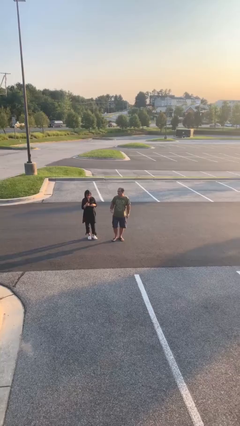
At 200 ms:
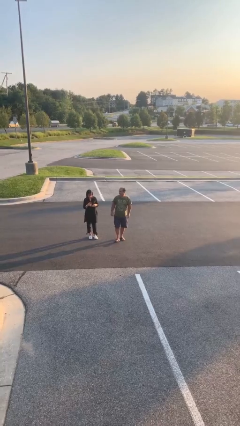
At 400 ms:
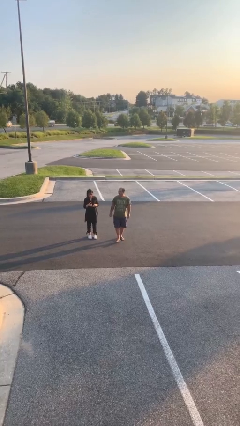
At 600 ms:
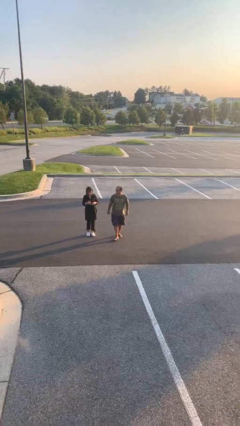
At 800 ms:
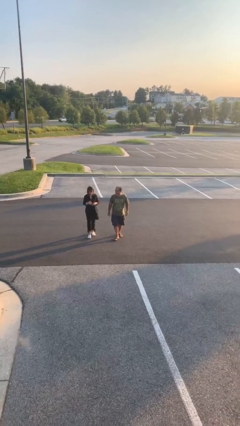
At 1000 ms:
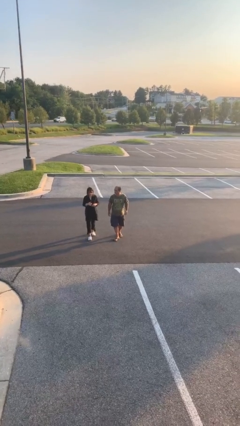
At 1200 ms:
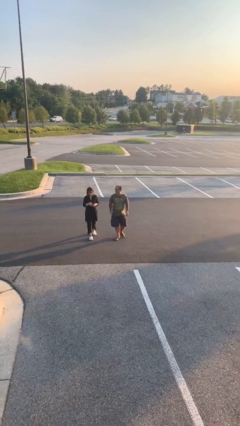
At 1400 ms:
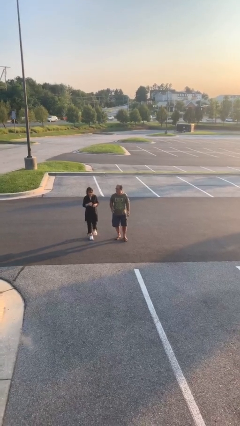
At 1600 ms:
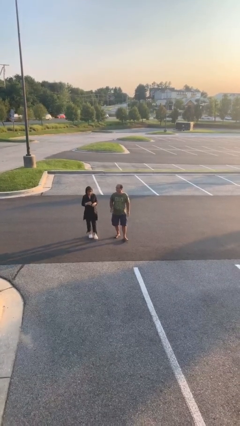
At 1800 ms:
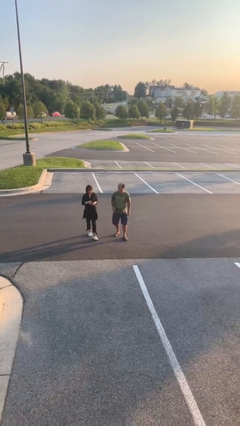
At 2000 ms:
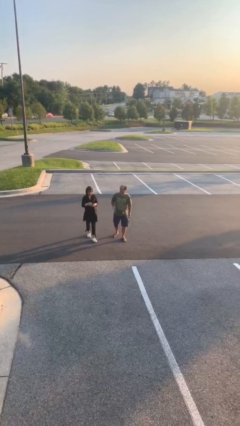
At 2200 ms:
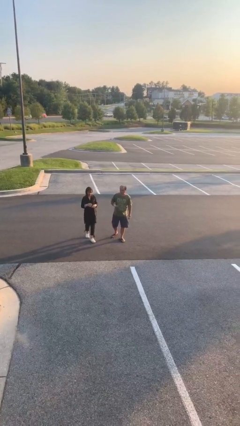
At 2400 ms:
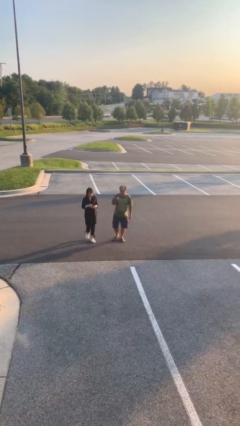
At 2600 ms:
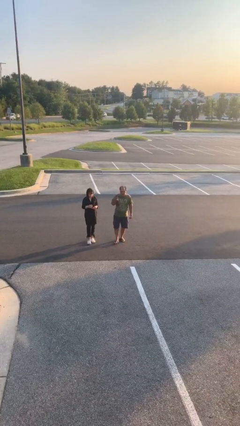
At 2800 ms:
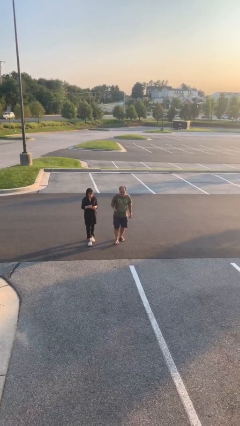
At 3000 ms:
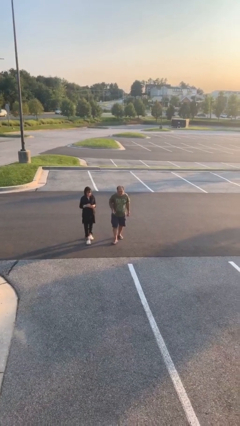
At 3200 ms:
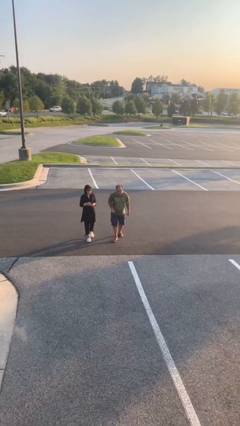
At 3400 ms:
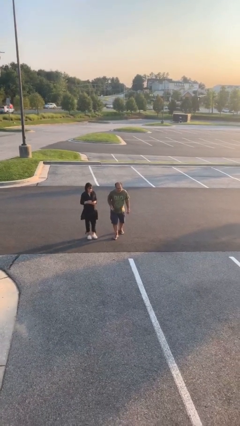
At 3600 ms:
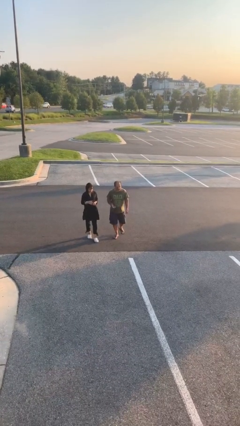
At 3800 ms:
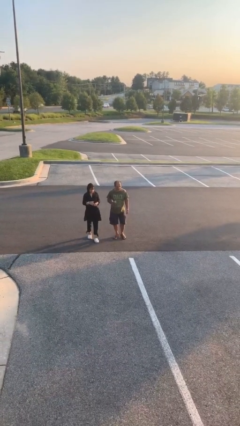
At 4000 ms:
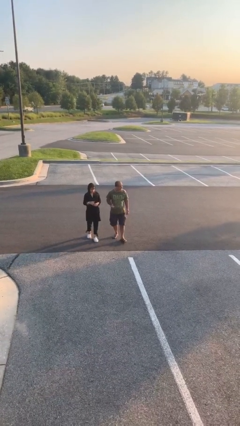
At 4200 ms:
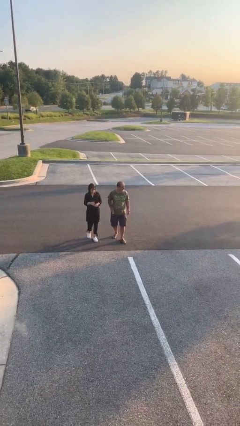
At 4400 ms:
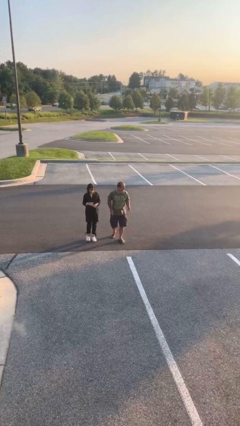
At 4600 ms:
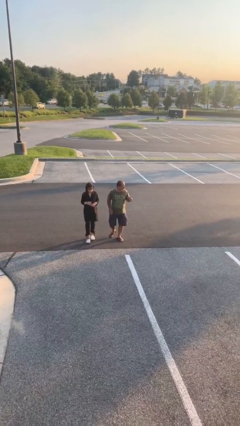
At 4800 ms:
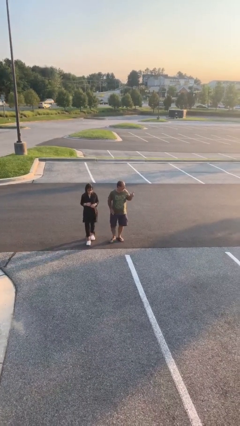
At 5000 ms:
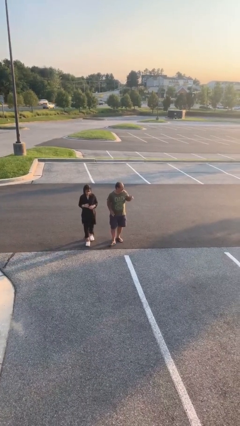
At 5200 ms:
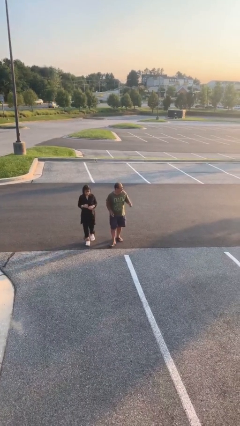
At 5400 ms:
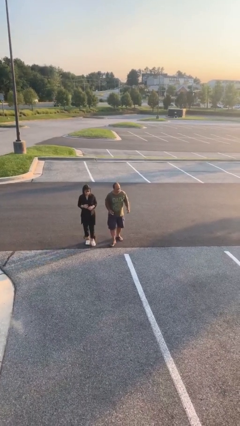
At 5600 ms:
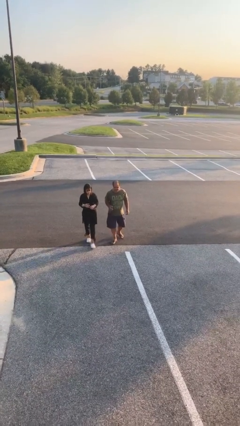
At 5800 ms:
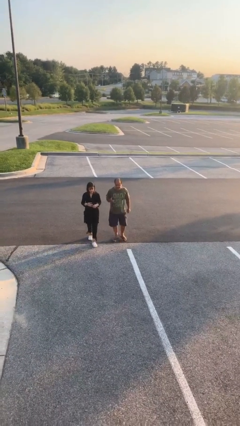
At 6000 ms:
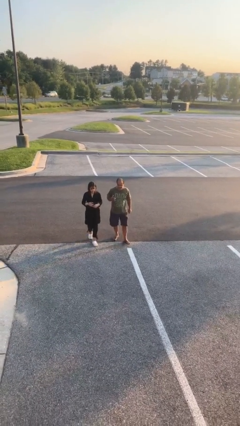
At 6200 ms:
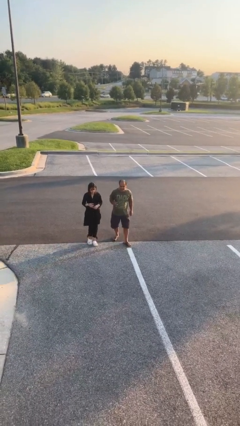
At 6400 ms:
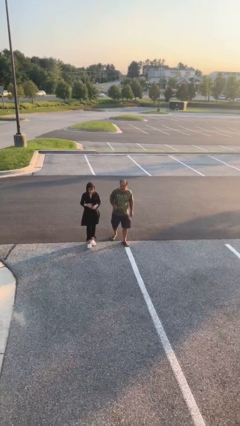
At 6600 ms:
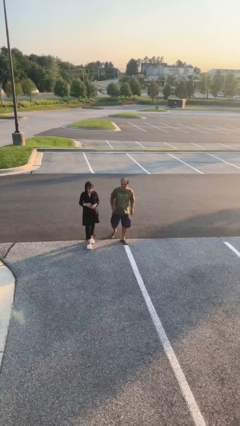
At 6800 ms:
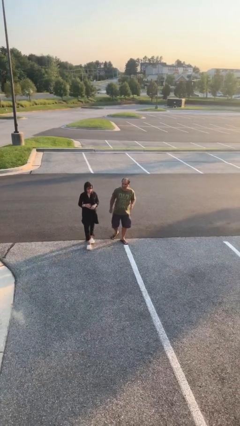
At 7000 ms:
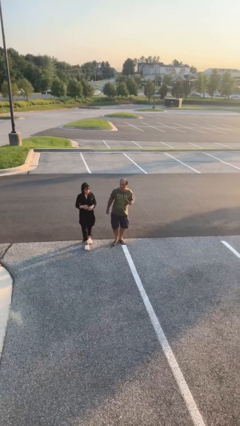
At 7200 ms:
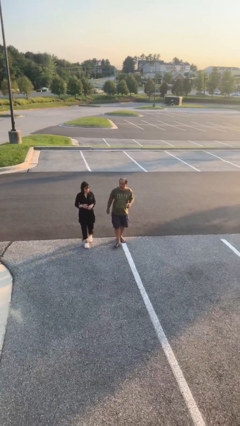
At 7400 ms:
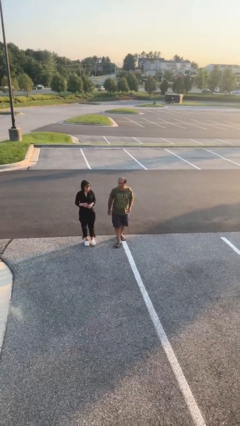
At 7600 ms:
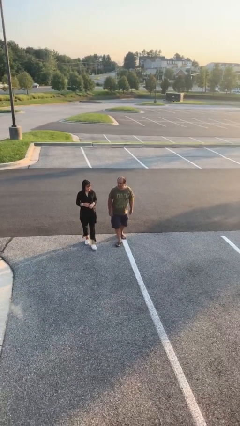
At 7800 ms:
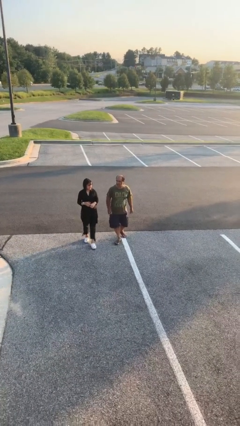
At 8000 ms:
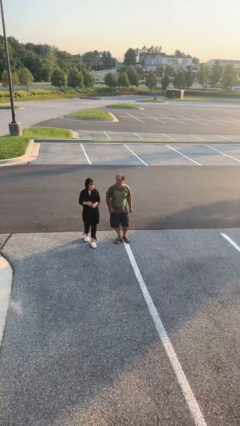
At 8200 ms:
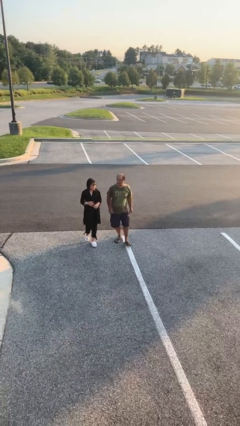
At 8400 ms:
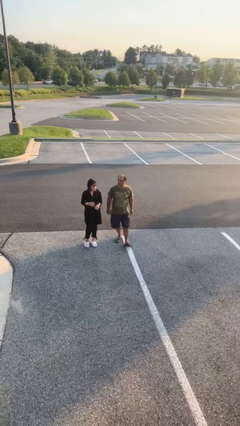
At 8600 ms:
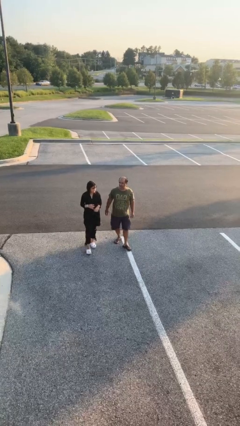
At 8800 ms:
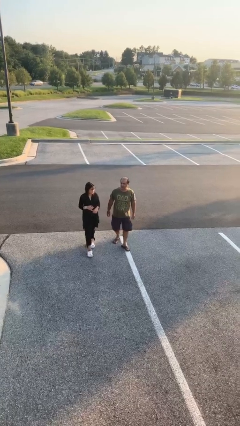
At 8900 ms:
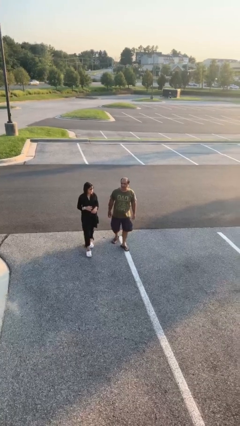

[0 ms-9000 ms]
person talks to person

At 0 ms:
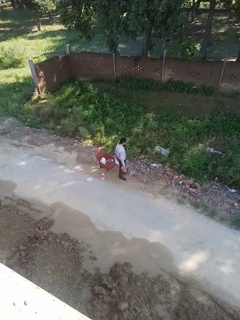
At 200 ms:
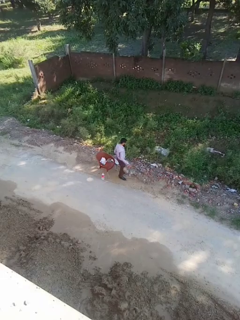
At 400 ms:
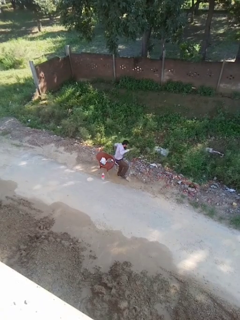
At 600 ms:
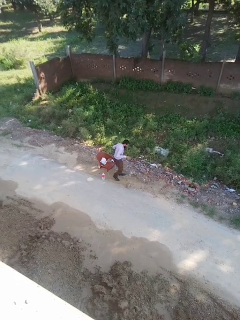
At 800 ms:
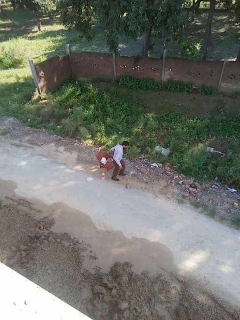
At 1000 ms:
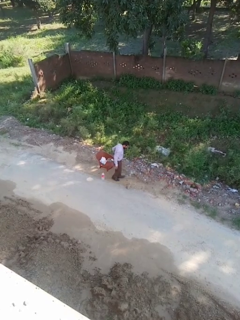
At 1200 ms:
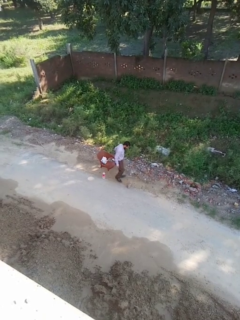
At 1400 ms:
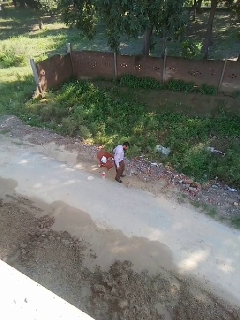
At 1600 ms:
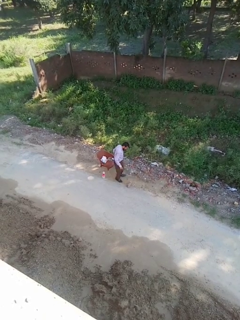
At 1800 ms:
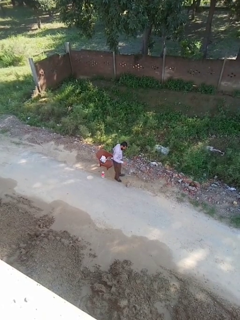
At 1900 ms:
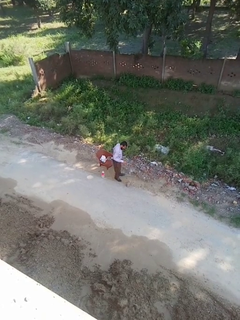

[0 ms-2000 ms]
person drops object

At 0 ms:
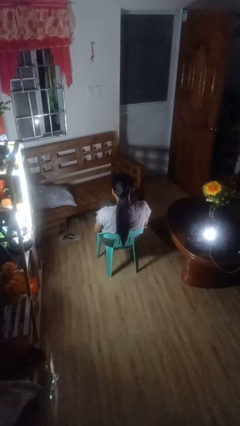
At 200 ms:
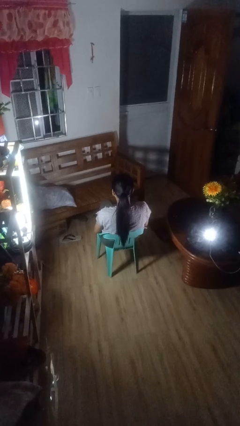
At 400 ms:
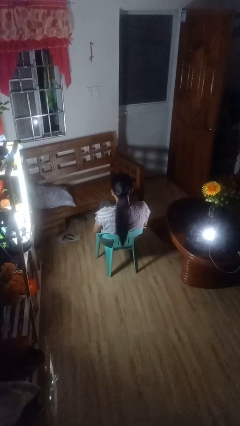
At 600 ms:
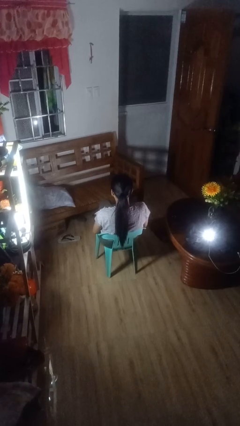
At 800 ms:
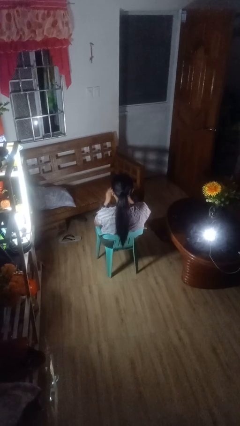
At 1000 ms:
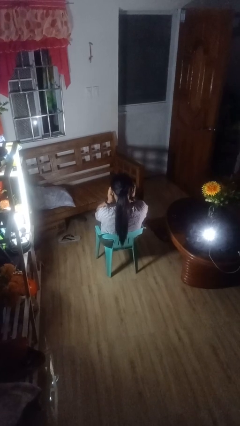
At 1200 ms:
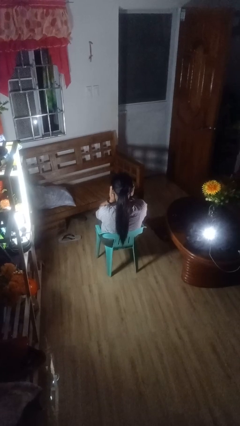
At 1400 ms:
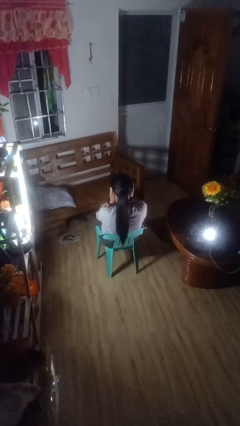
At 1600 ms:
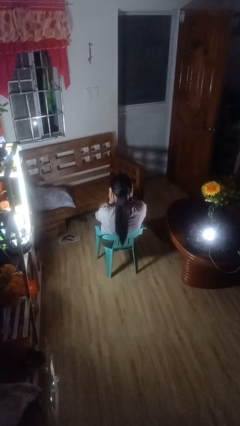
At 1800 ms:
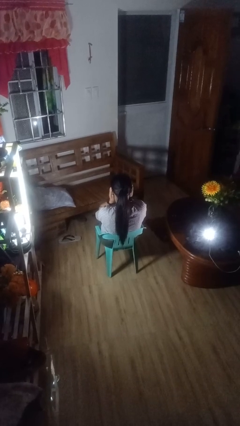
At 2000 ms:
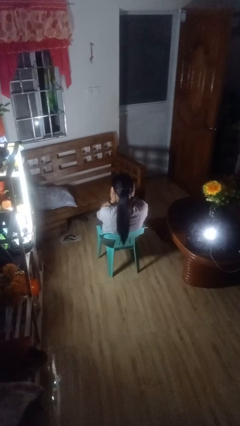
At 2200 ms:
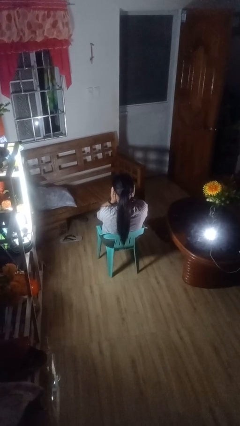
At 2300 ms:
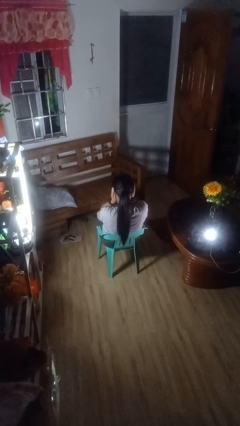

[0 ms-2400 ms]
person puts fingers in ear

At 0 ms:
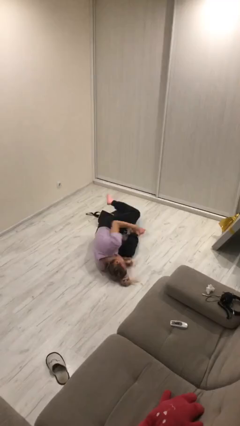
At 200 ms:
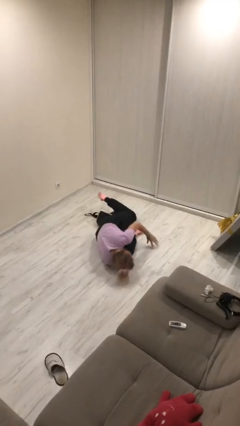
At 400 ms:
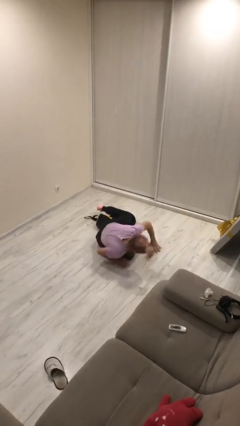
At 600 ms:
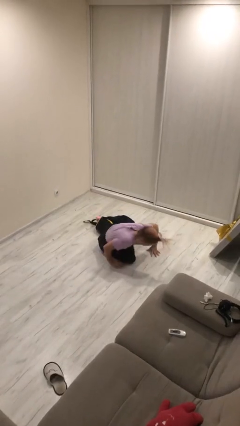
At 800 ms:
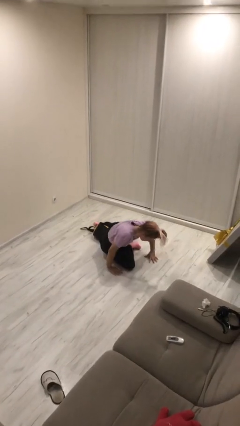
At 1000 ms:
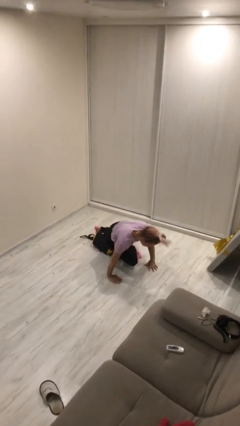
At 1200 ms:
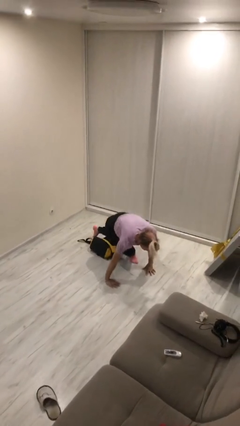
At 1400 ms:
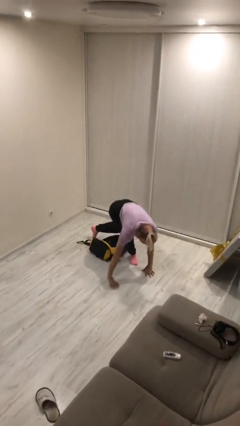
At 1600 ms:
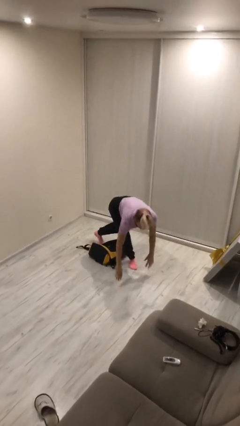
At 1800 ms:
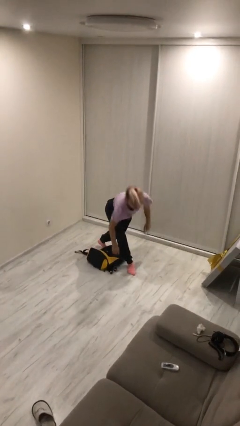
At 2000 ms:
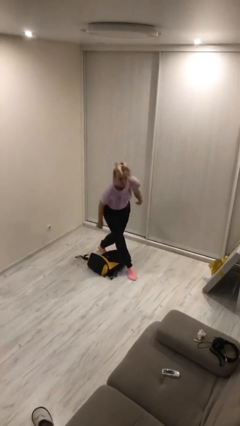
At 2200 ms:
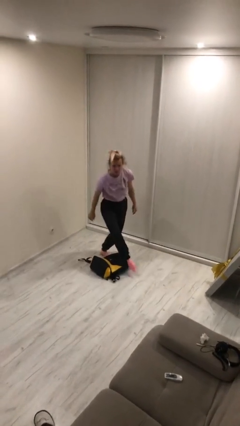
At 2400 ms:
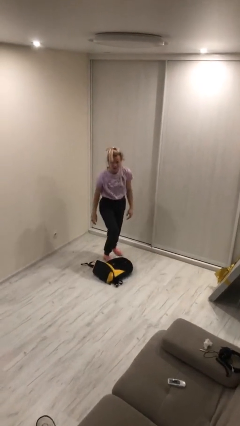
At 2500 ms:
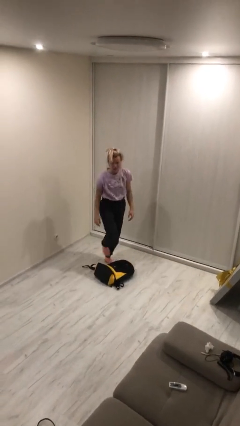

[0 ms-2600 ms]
person stands up from floor

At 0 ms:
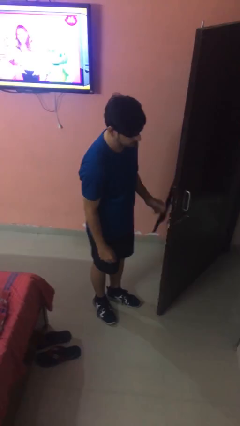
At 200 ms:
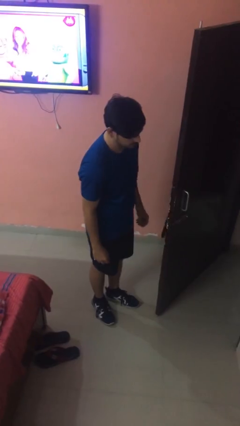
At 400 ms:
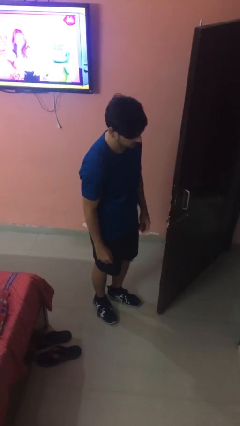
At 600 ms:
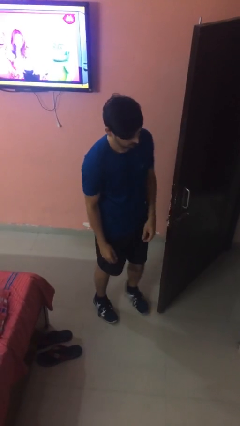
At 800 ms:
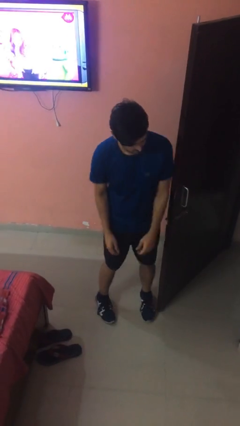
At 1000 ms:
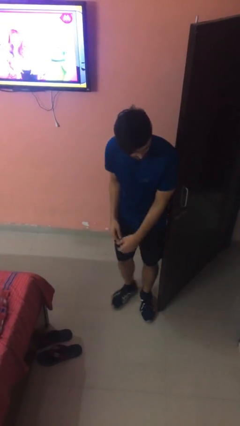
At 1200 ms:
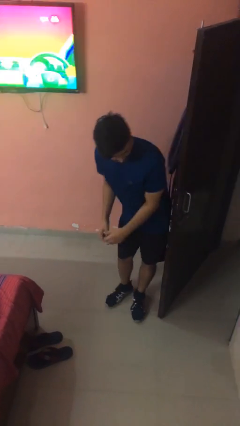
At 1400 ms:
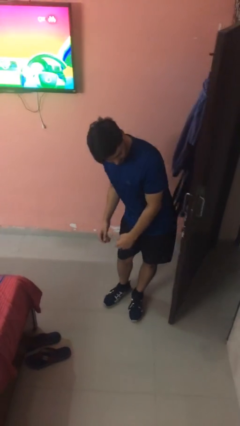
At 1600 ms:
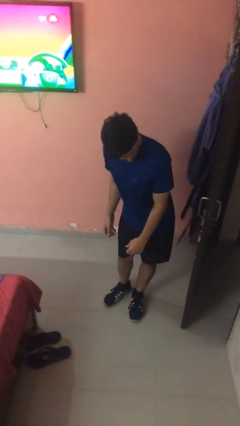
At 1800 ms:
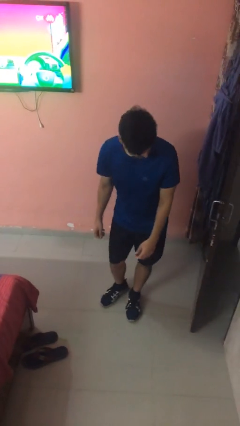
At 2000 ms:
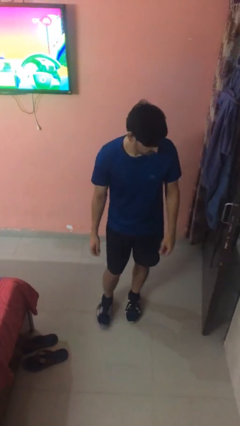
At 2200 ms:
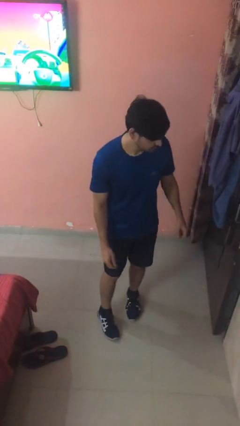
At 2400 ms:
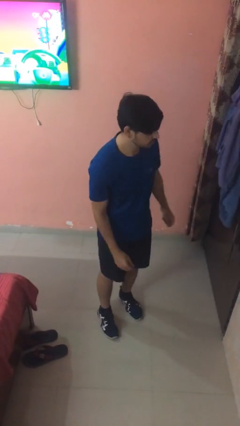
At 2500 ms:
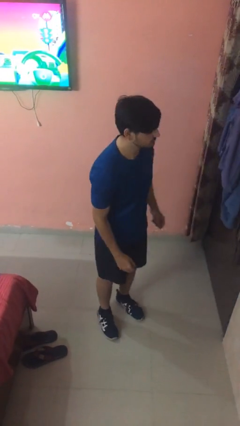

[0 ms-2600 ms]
person closes door with hip
